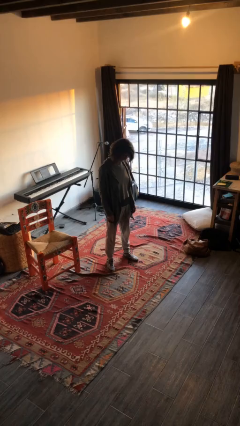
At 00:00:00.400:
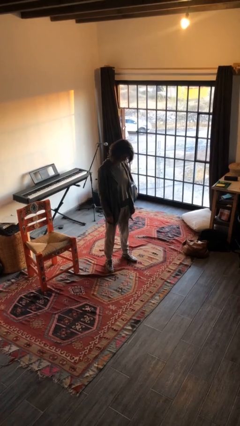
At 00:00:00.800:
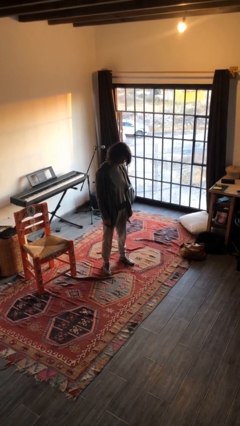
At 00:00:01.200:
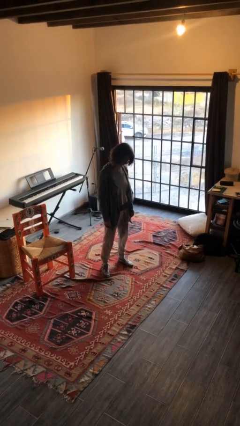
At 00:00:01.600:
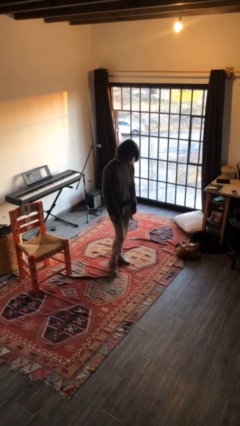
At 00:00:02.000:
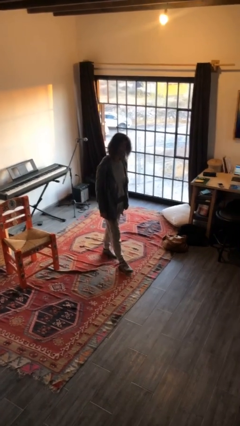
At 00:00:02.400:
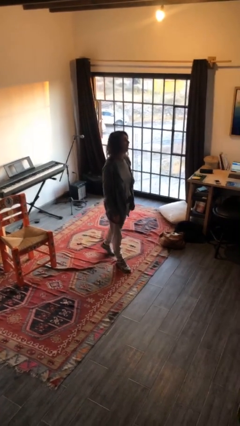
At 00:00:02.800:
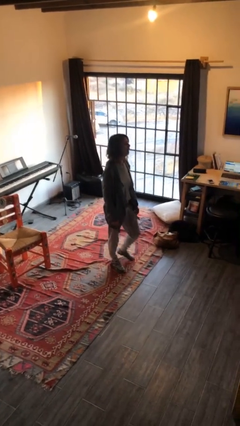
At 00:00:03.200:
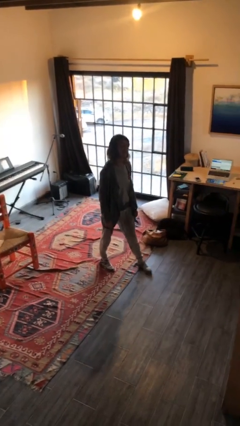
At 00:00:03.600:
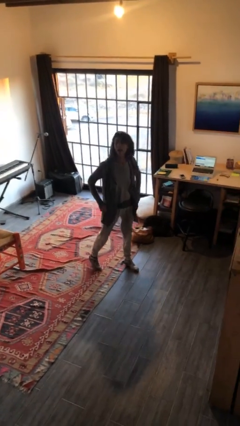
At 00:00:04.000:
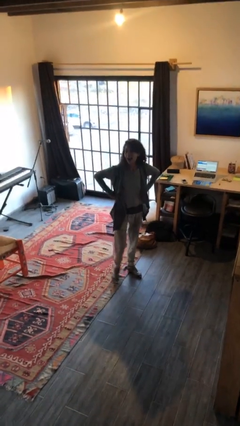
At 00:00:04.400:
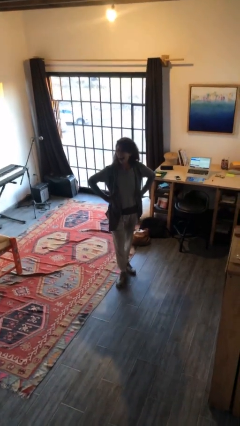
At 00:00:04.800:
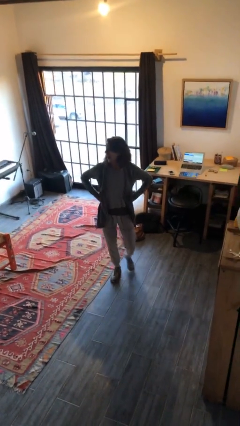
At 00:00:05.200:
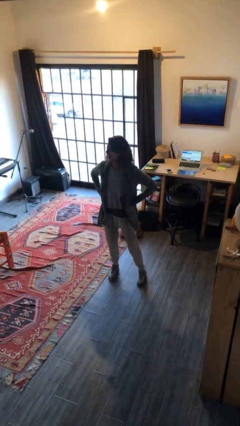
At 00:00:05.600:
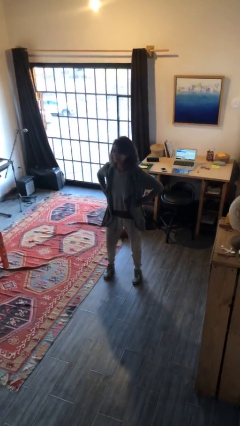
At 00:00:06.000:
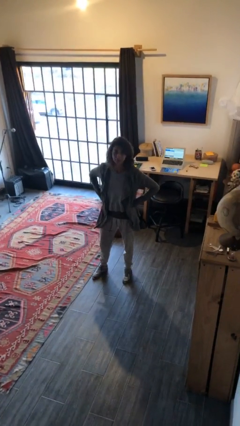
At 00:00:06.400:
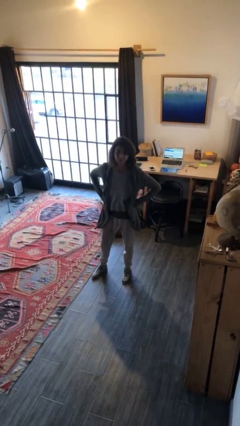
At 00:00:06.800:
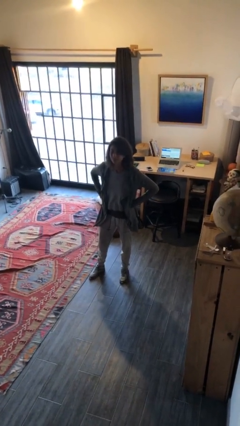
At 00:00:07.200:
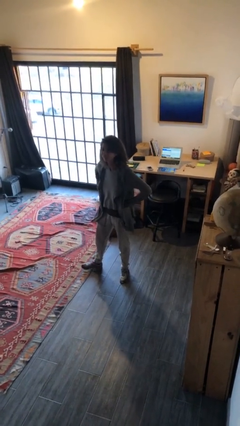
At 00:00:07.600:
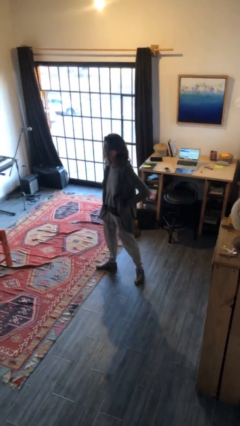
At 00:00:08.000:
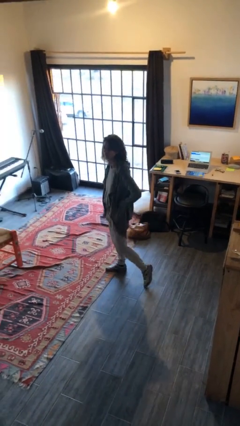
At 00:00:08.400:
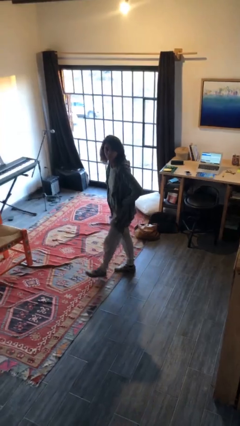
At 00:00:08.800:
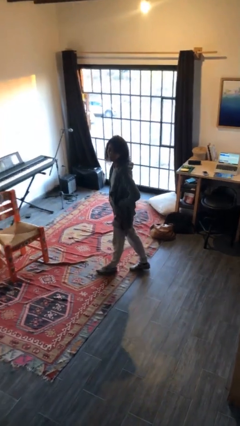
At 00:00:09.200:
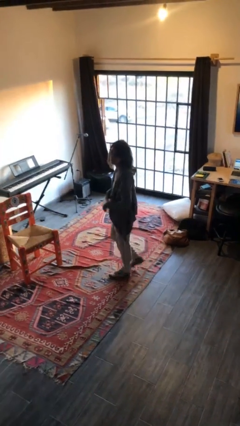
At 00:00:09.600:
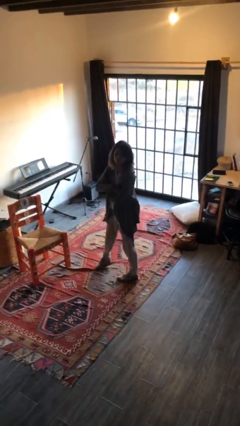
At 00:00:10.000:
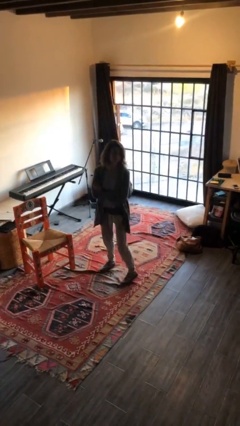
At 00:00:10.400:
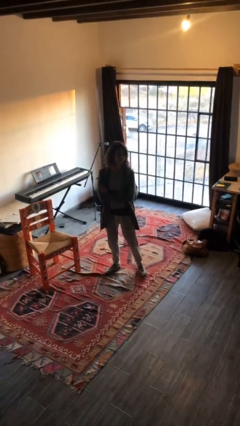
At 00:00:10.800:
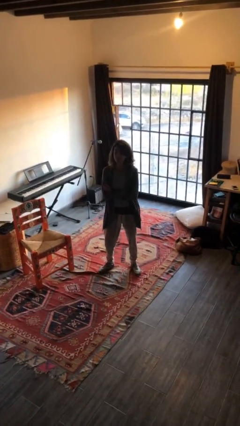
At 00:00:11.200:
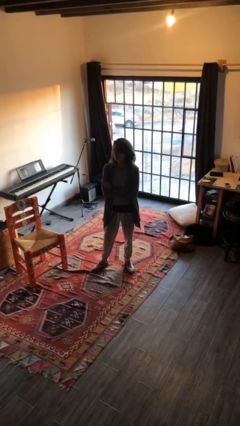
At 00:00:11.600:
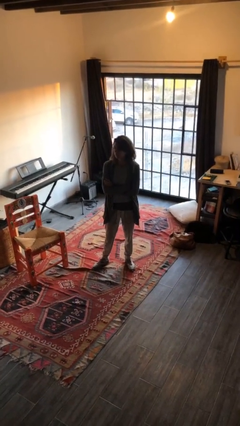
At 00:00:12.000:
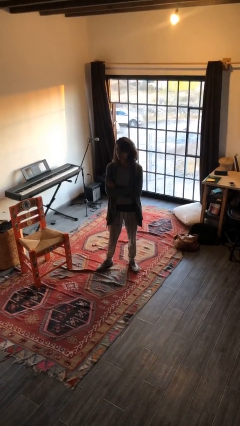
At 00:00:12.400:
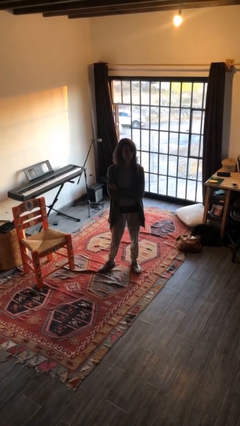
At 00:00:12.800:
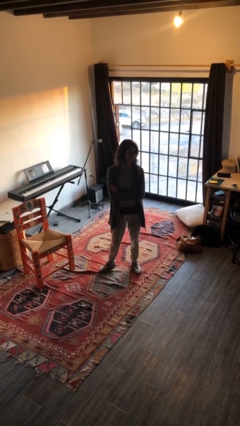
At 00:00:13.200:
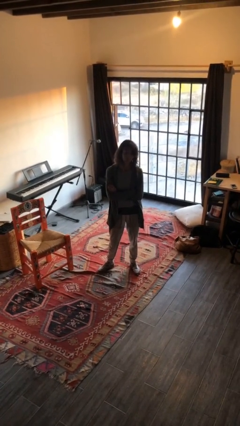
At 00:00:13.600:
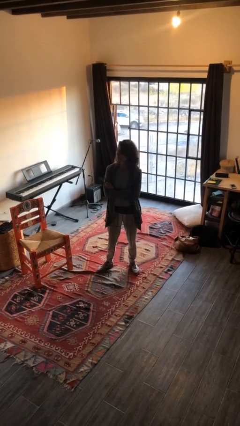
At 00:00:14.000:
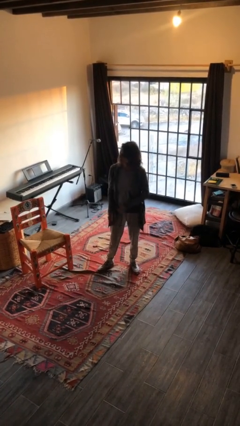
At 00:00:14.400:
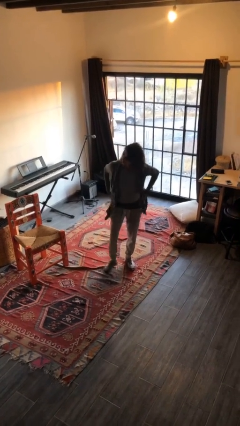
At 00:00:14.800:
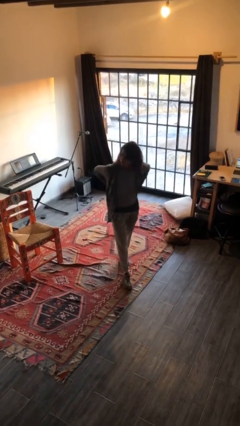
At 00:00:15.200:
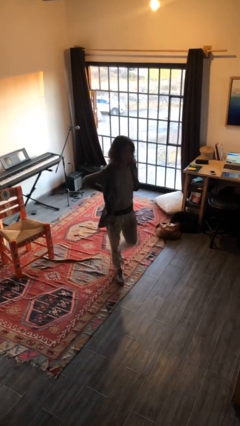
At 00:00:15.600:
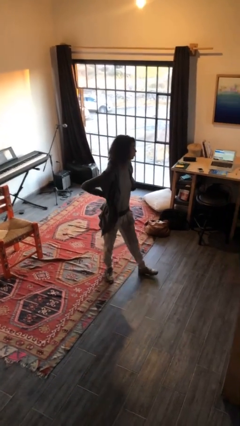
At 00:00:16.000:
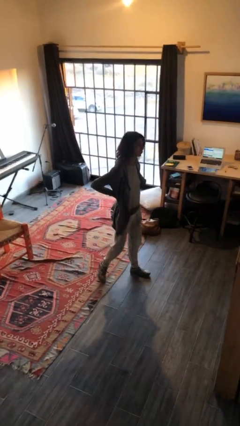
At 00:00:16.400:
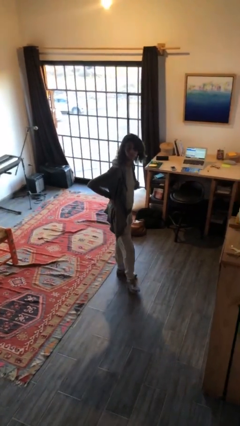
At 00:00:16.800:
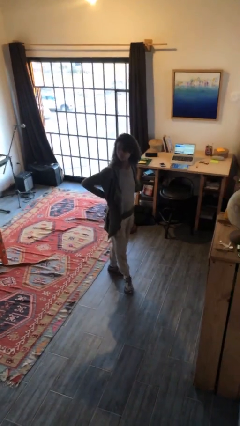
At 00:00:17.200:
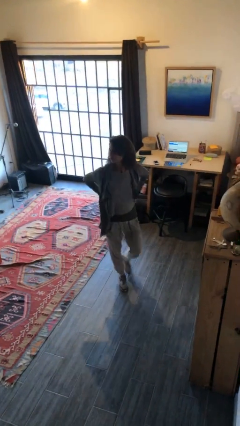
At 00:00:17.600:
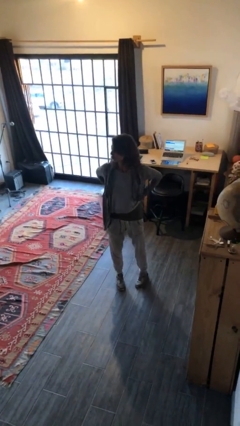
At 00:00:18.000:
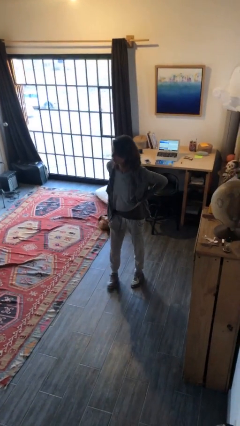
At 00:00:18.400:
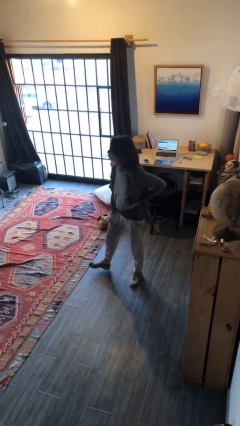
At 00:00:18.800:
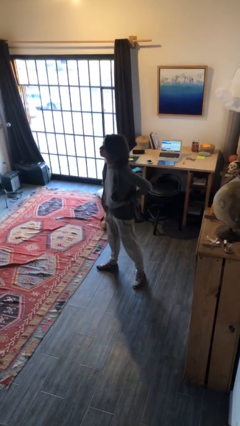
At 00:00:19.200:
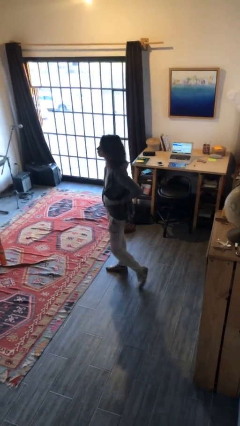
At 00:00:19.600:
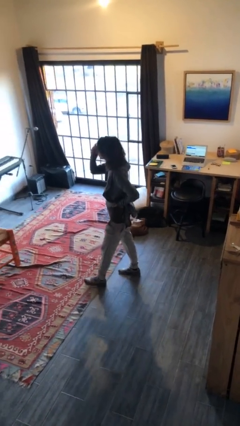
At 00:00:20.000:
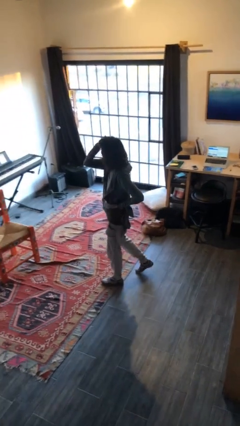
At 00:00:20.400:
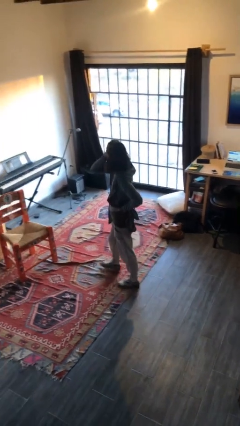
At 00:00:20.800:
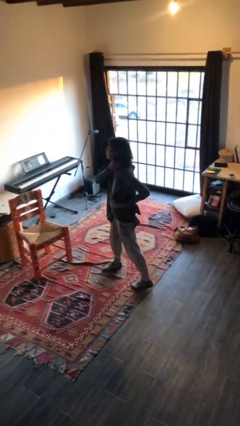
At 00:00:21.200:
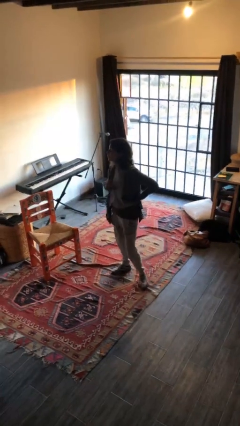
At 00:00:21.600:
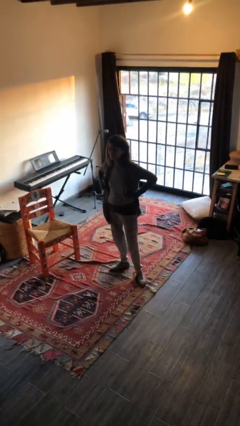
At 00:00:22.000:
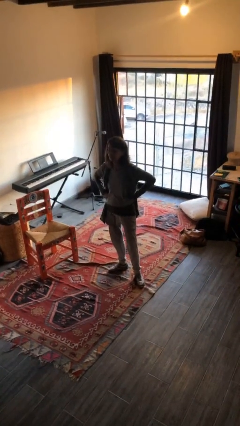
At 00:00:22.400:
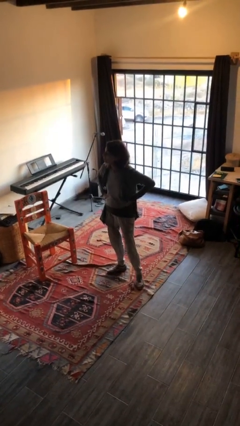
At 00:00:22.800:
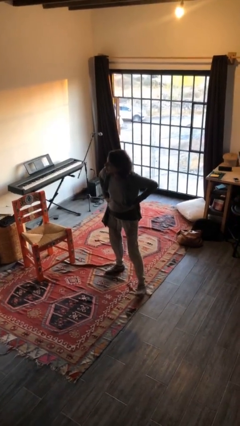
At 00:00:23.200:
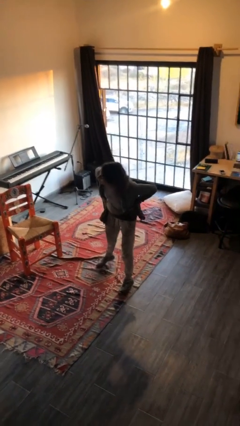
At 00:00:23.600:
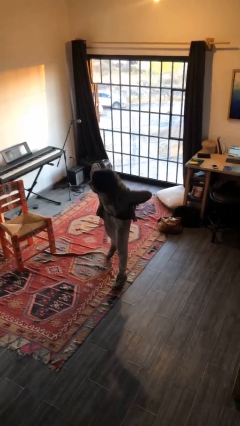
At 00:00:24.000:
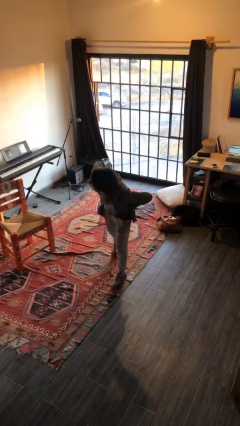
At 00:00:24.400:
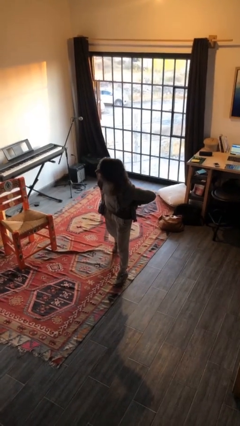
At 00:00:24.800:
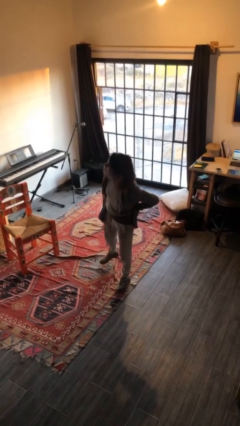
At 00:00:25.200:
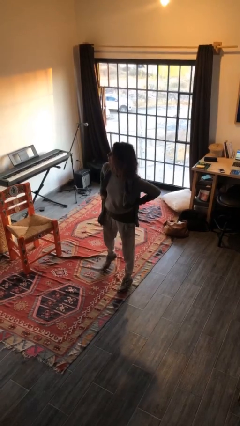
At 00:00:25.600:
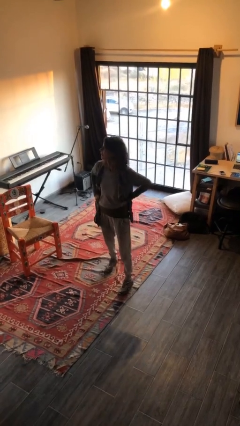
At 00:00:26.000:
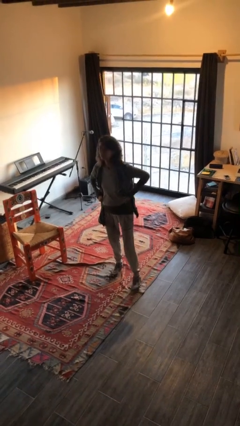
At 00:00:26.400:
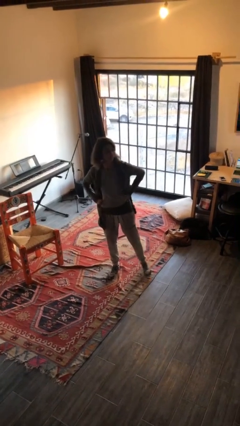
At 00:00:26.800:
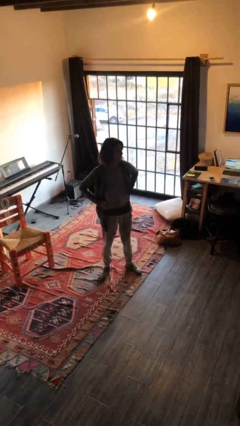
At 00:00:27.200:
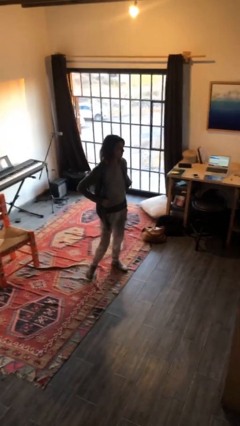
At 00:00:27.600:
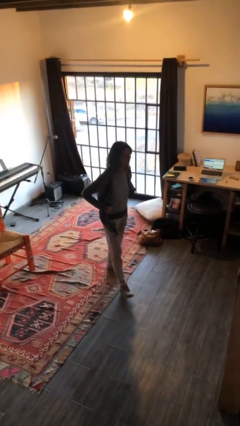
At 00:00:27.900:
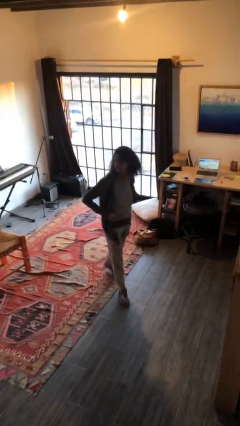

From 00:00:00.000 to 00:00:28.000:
person walks

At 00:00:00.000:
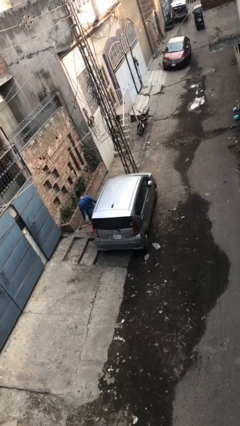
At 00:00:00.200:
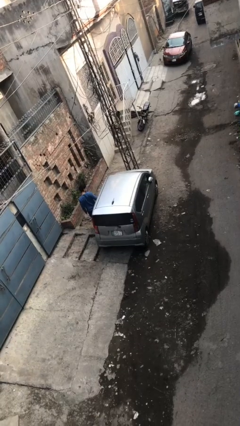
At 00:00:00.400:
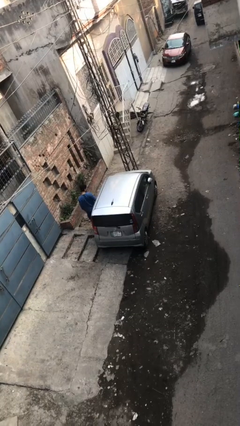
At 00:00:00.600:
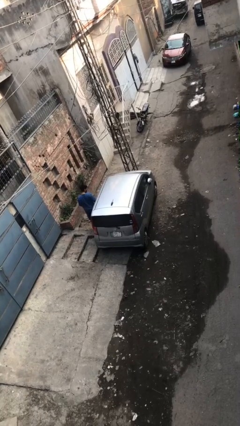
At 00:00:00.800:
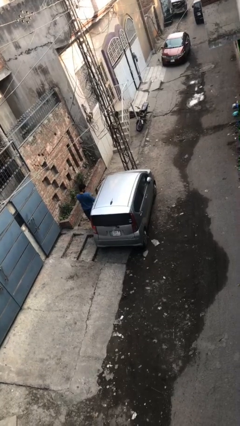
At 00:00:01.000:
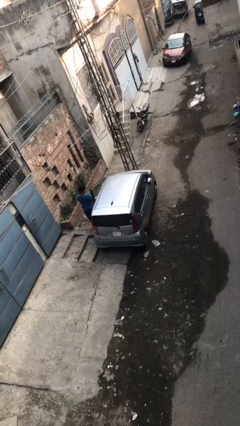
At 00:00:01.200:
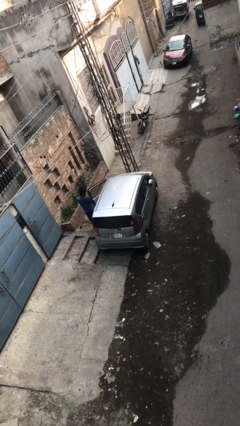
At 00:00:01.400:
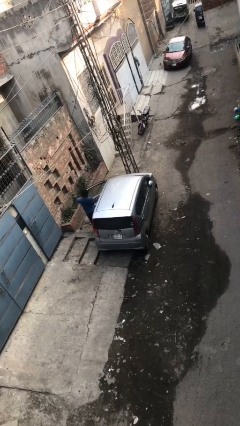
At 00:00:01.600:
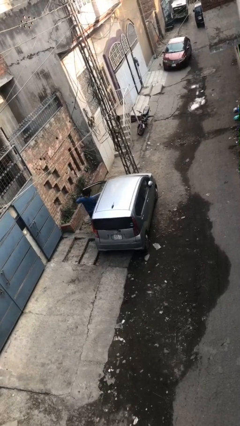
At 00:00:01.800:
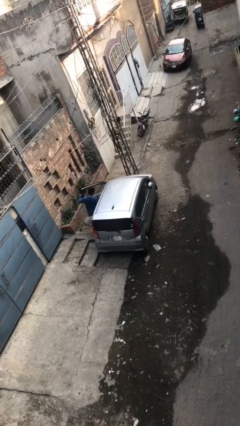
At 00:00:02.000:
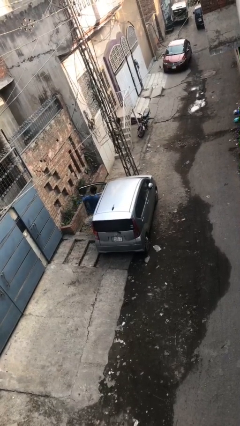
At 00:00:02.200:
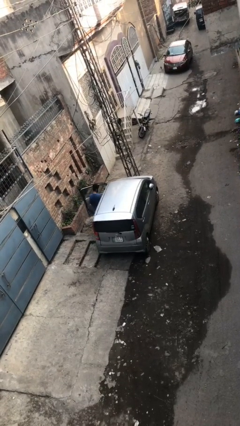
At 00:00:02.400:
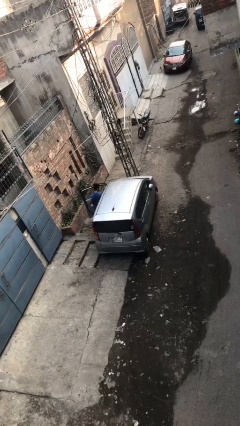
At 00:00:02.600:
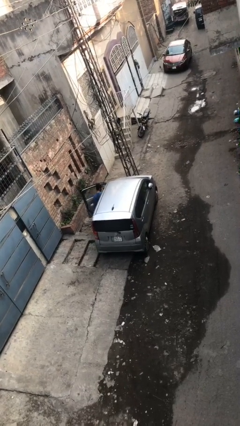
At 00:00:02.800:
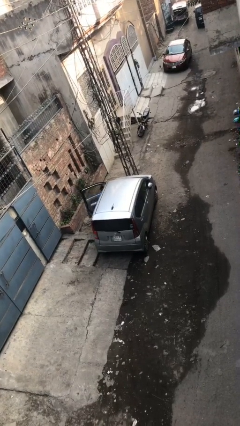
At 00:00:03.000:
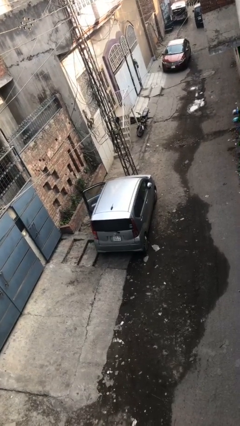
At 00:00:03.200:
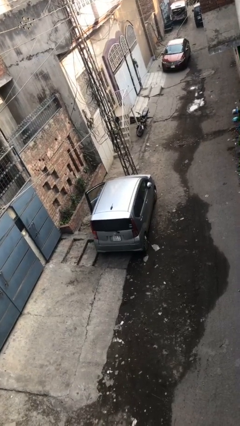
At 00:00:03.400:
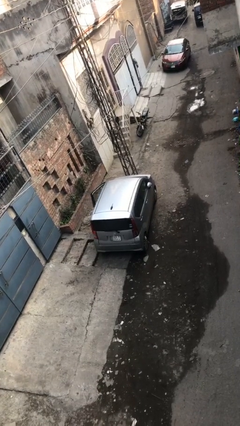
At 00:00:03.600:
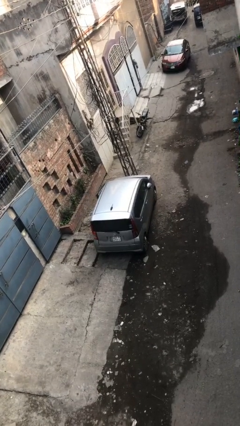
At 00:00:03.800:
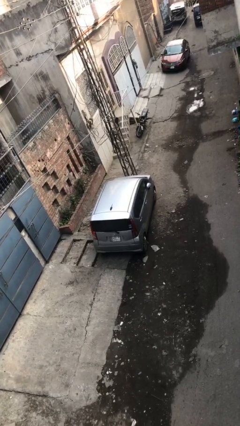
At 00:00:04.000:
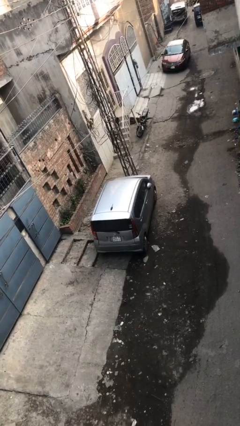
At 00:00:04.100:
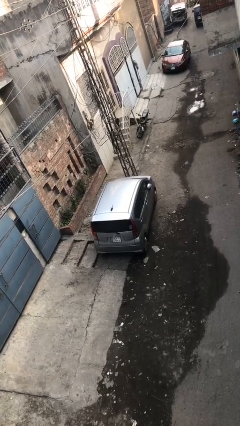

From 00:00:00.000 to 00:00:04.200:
car picks up person
